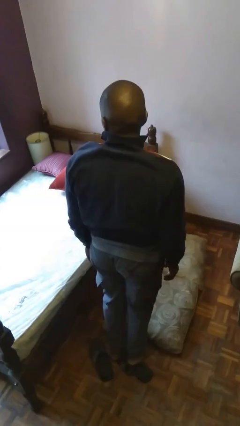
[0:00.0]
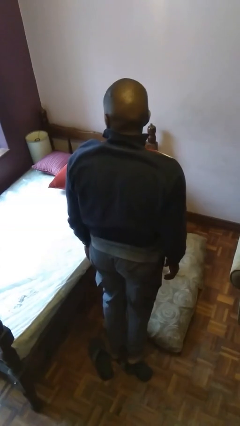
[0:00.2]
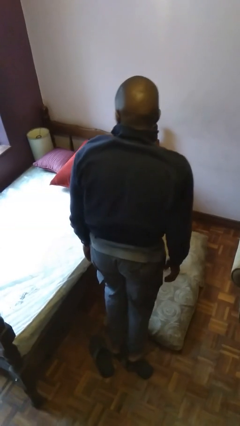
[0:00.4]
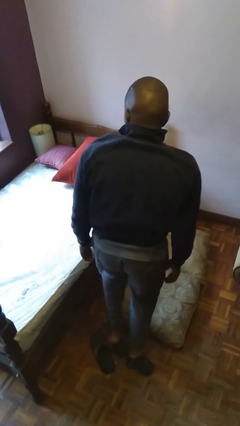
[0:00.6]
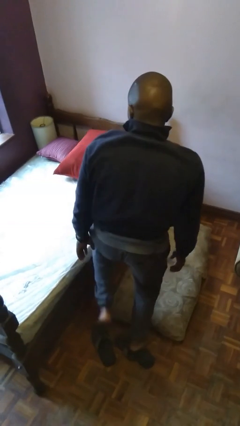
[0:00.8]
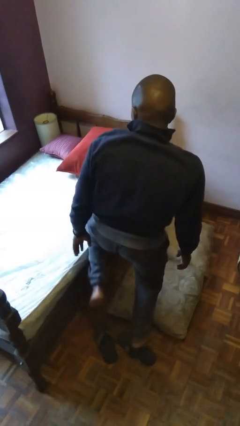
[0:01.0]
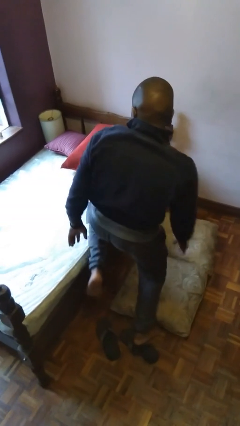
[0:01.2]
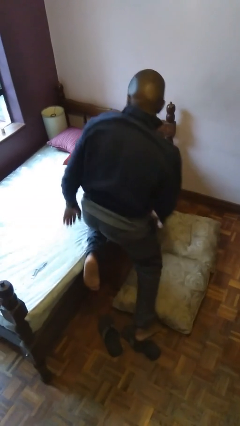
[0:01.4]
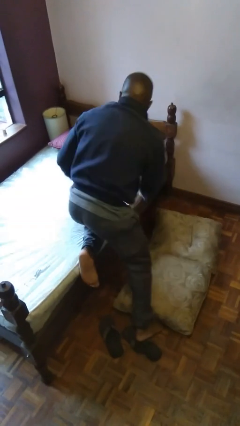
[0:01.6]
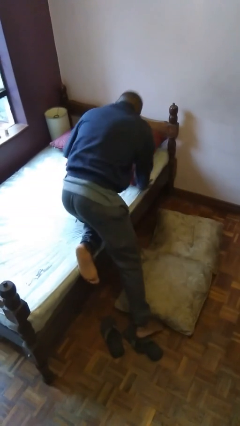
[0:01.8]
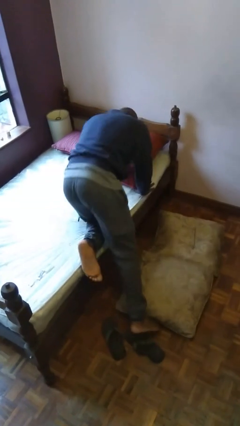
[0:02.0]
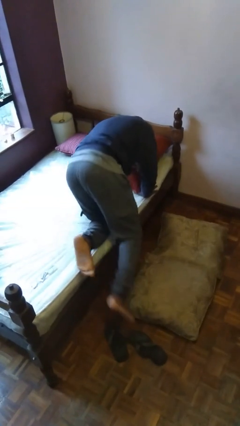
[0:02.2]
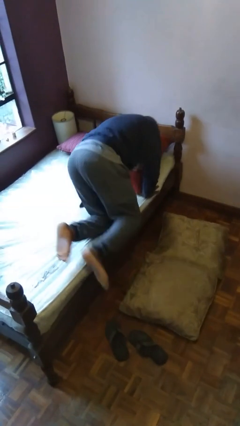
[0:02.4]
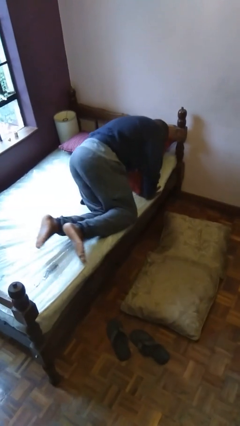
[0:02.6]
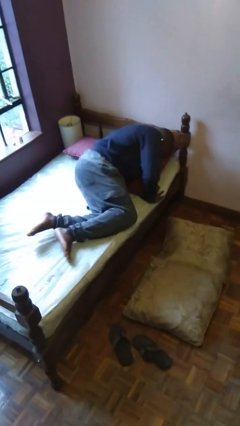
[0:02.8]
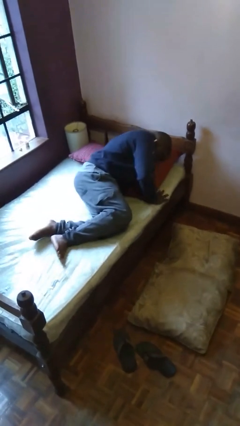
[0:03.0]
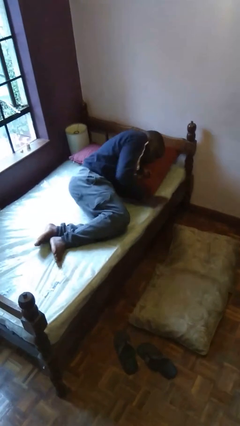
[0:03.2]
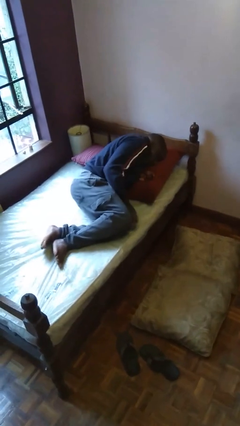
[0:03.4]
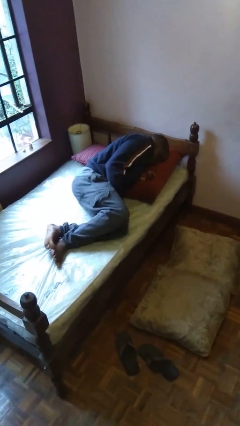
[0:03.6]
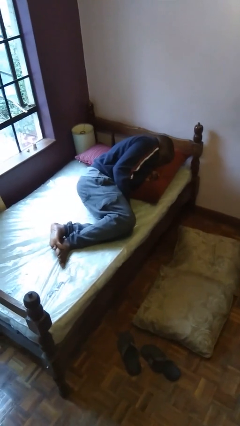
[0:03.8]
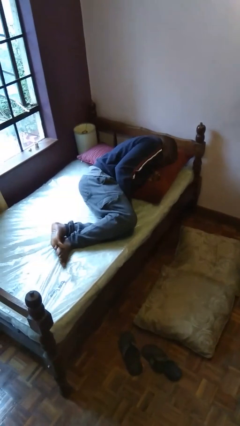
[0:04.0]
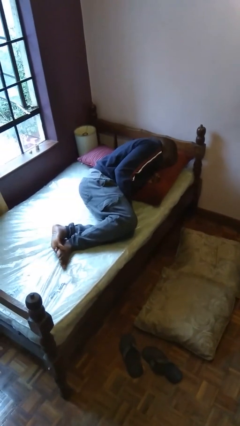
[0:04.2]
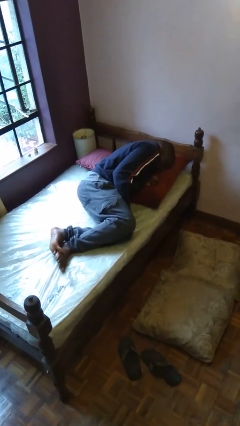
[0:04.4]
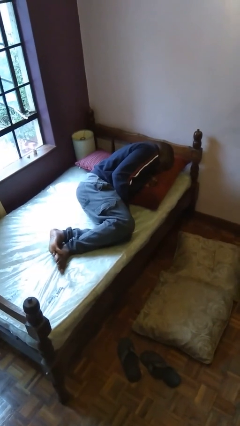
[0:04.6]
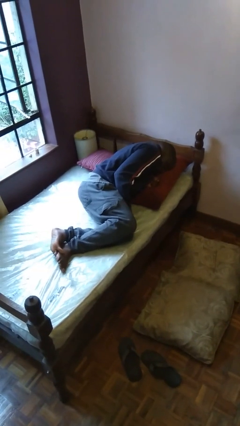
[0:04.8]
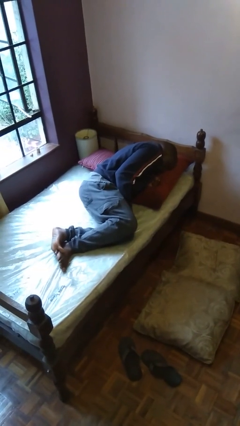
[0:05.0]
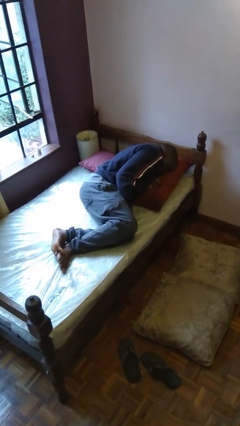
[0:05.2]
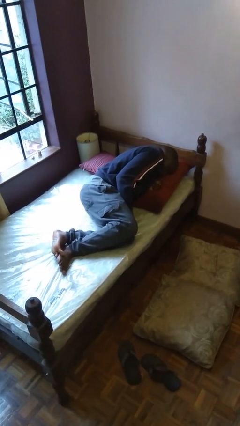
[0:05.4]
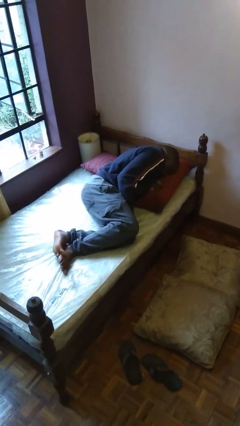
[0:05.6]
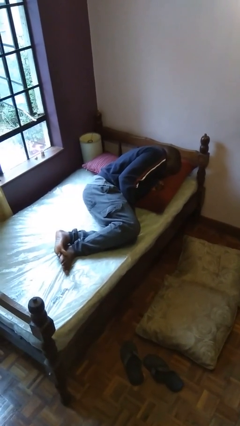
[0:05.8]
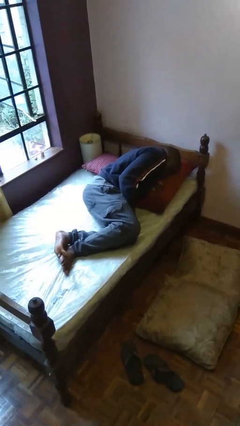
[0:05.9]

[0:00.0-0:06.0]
person lies down on bed

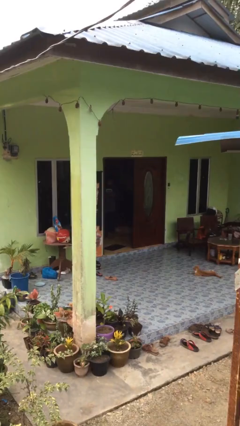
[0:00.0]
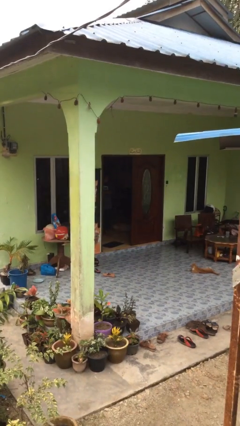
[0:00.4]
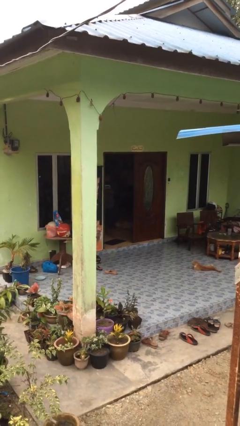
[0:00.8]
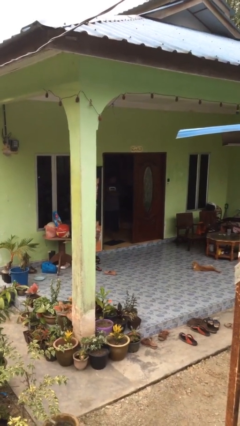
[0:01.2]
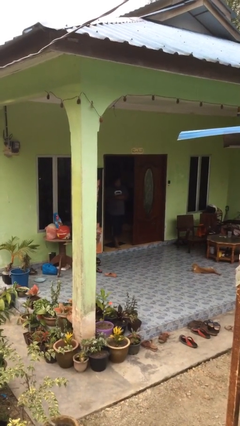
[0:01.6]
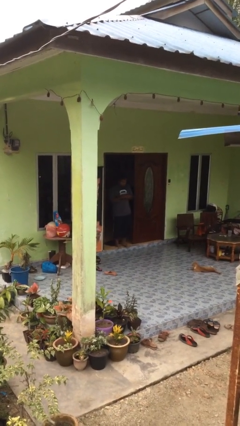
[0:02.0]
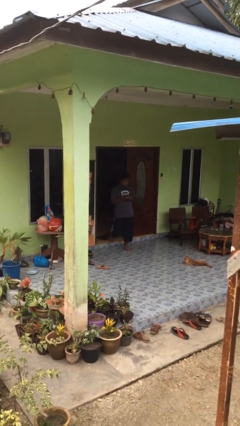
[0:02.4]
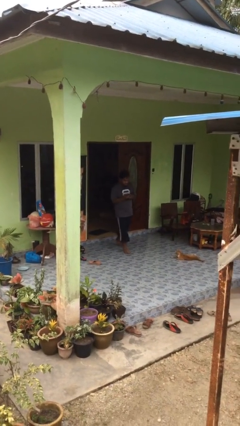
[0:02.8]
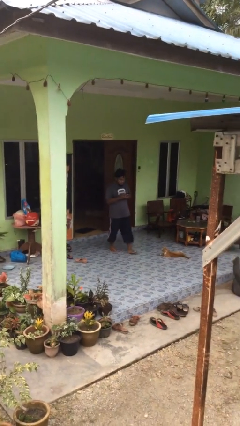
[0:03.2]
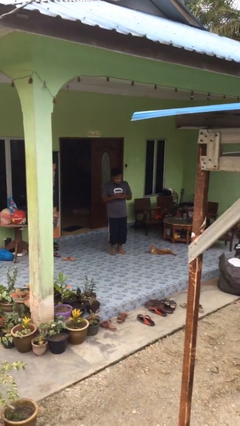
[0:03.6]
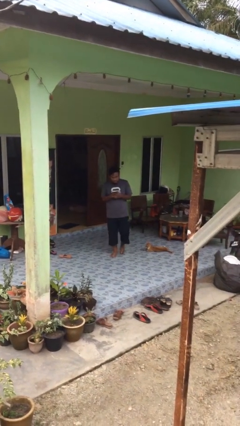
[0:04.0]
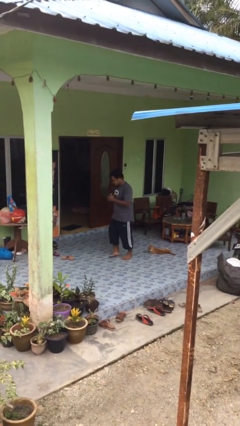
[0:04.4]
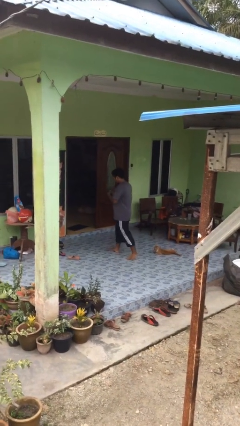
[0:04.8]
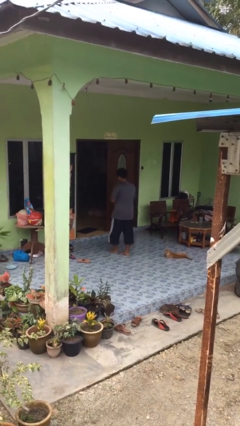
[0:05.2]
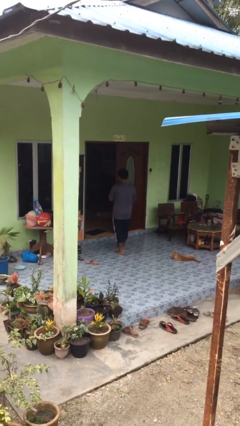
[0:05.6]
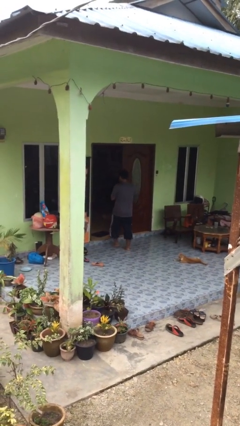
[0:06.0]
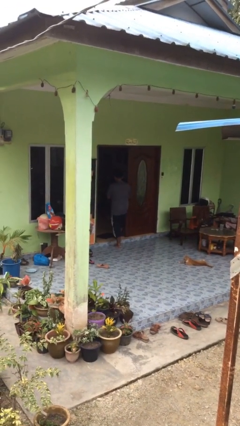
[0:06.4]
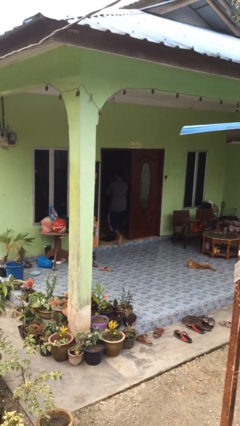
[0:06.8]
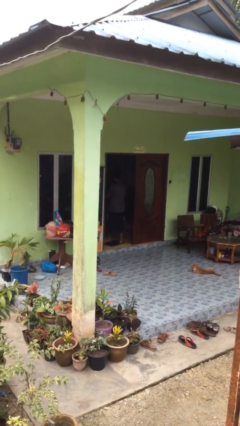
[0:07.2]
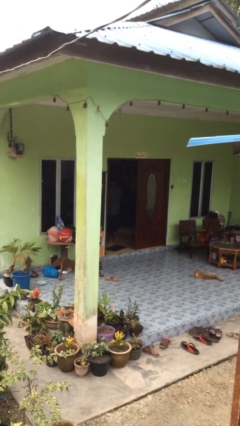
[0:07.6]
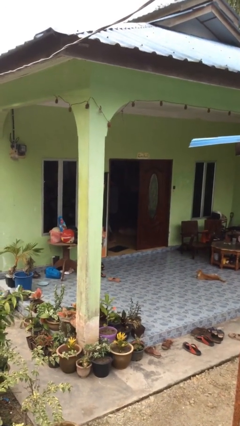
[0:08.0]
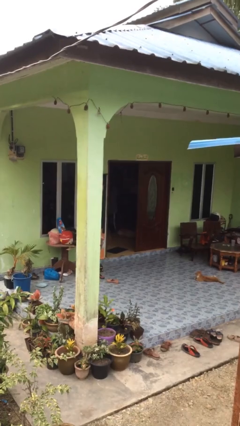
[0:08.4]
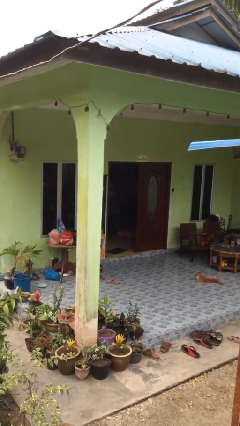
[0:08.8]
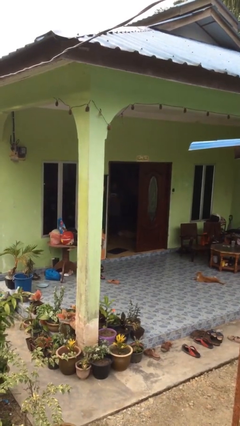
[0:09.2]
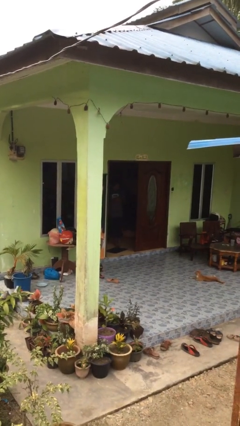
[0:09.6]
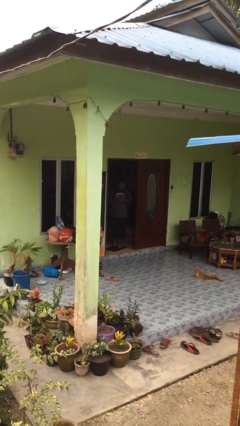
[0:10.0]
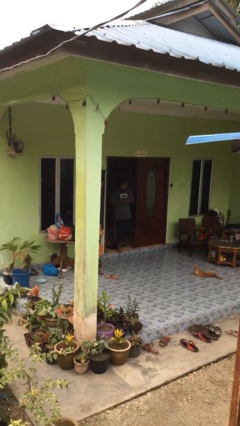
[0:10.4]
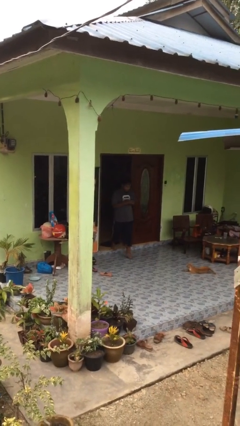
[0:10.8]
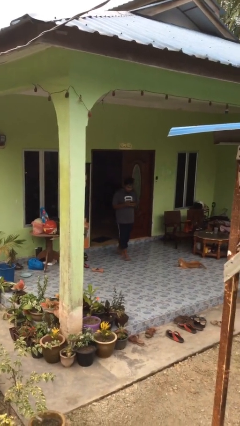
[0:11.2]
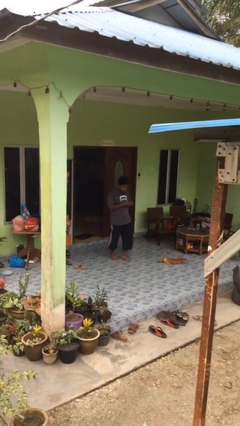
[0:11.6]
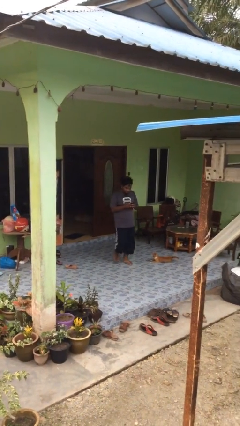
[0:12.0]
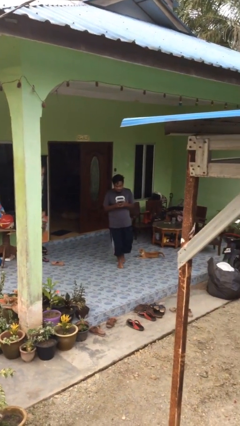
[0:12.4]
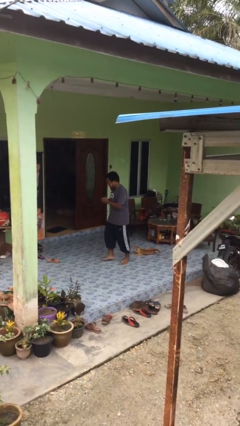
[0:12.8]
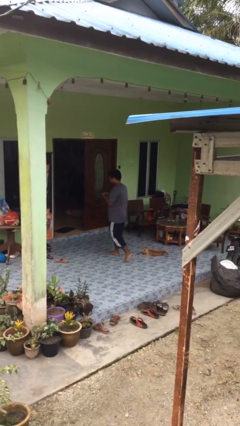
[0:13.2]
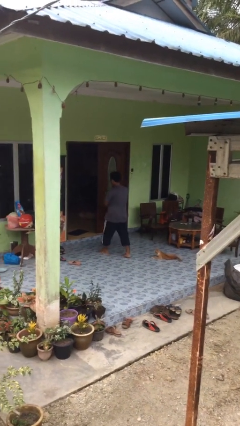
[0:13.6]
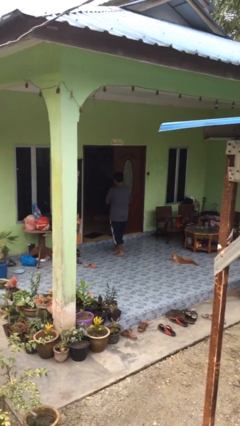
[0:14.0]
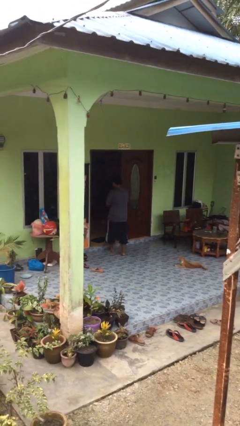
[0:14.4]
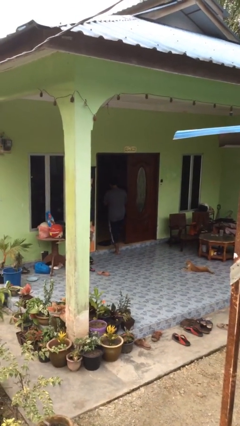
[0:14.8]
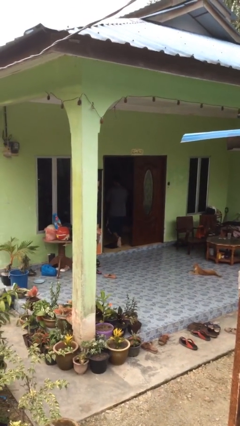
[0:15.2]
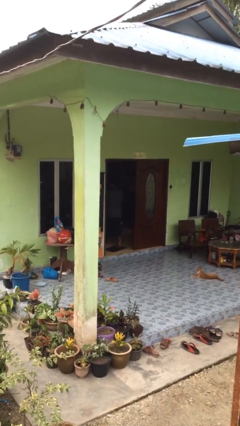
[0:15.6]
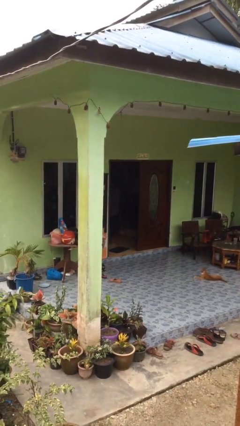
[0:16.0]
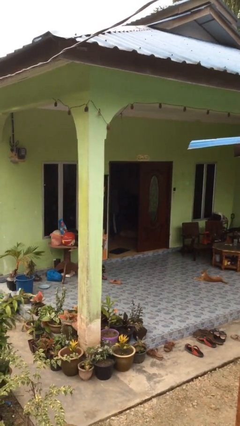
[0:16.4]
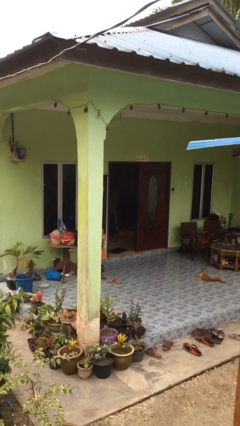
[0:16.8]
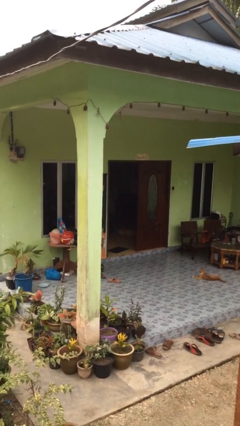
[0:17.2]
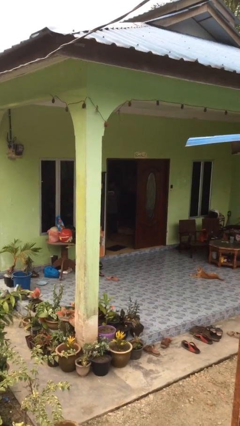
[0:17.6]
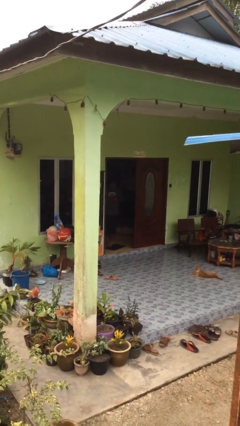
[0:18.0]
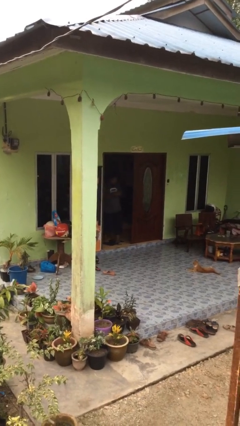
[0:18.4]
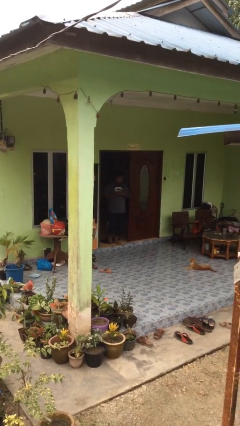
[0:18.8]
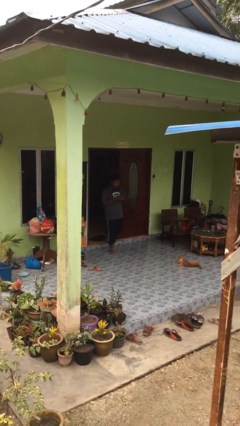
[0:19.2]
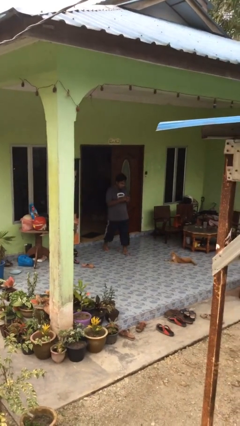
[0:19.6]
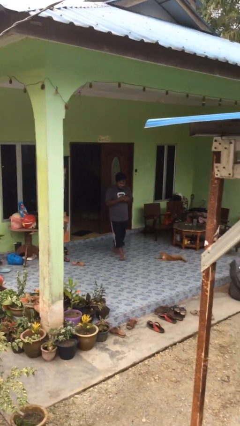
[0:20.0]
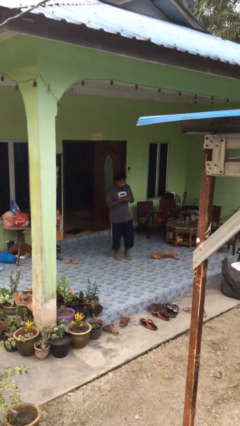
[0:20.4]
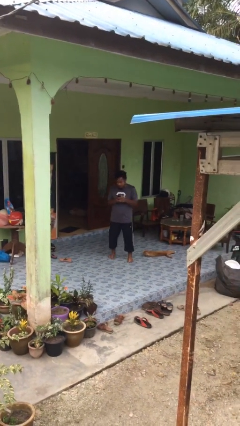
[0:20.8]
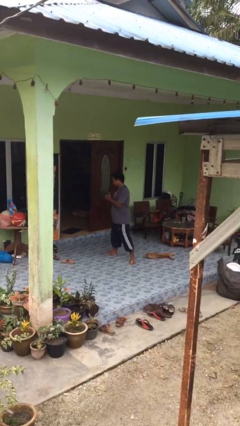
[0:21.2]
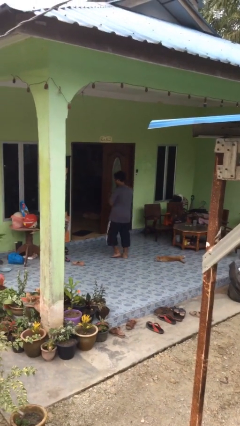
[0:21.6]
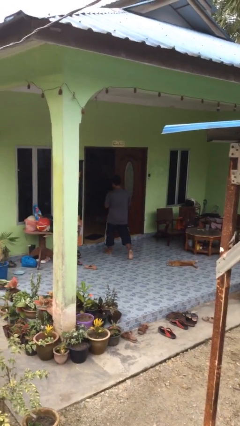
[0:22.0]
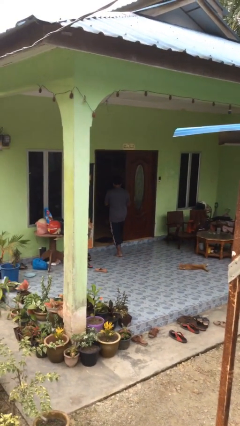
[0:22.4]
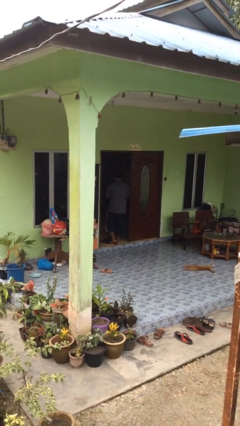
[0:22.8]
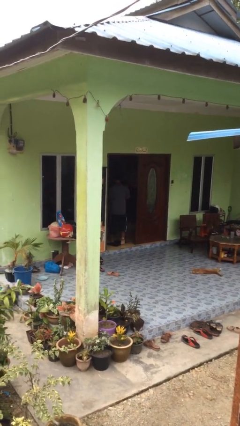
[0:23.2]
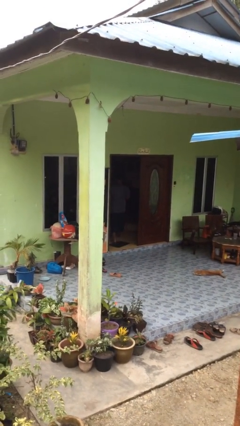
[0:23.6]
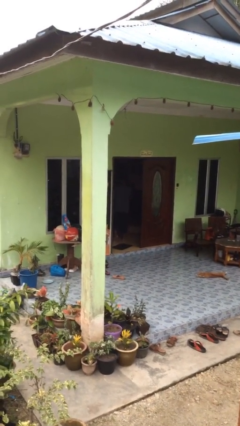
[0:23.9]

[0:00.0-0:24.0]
person texts on phone

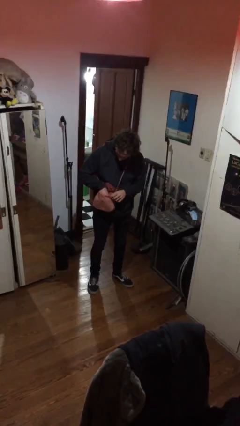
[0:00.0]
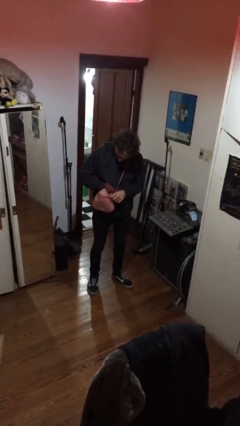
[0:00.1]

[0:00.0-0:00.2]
person takes object from purse
